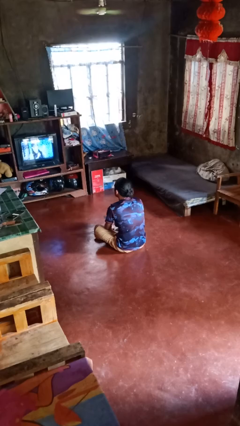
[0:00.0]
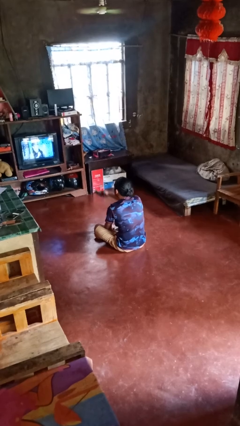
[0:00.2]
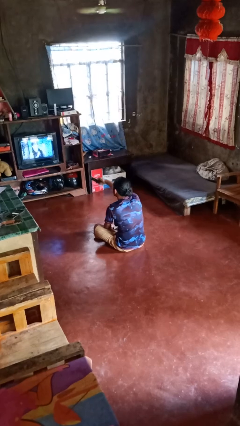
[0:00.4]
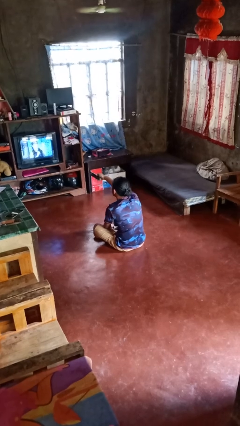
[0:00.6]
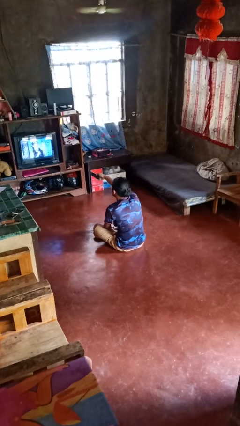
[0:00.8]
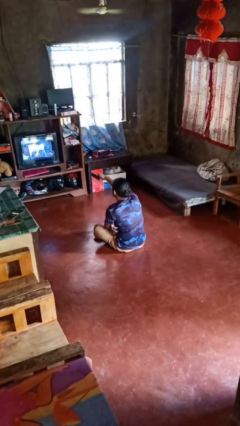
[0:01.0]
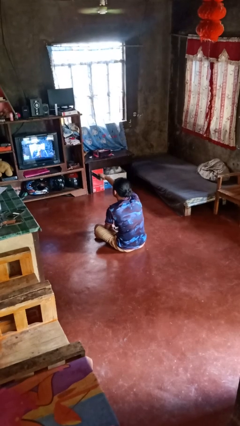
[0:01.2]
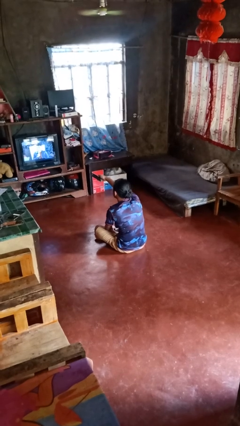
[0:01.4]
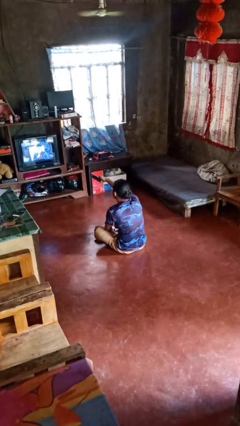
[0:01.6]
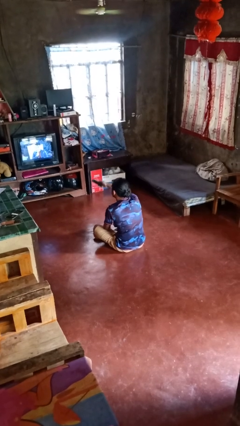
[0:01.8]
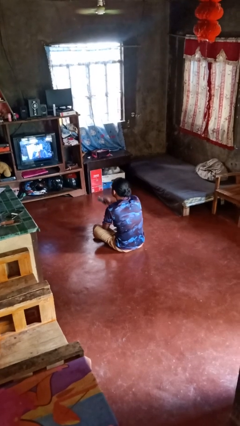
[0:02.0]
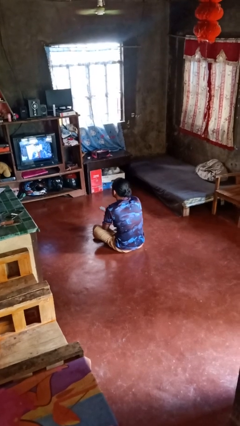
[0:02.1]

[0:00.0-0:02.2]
person uses television remote

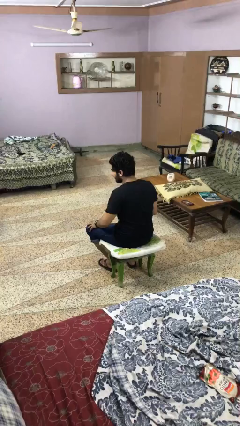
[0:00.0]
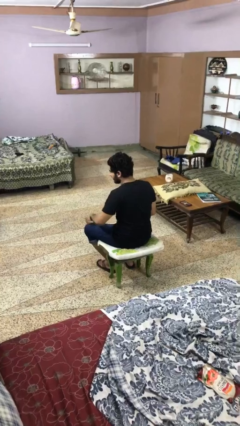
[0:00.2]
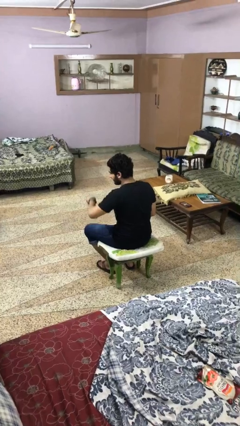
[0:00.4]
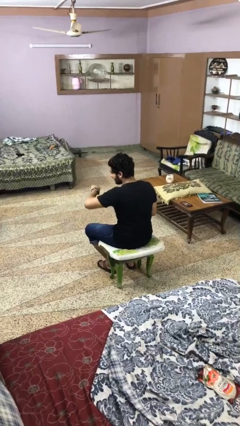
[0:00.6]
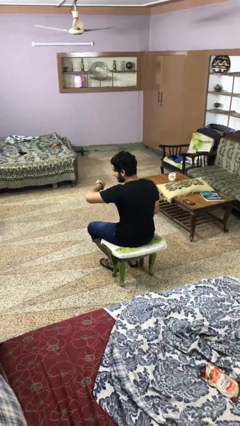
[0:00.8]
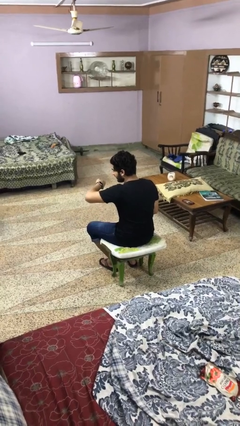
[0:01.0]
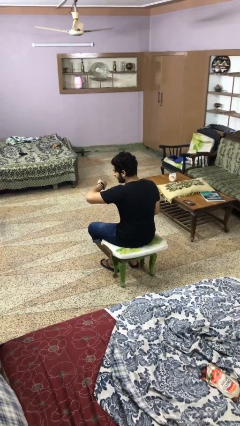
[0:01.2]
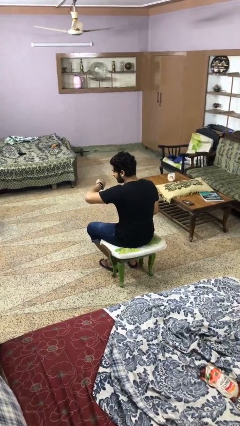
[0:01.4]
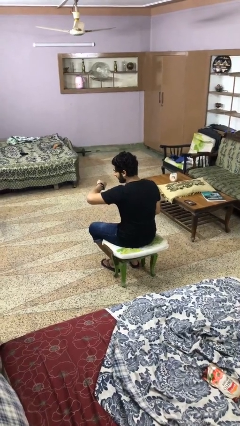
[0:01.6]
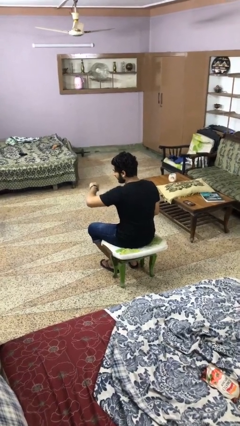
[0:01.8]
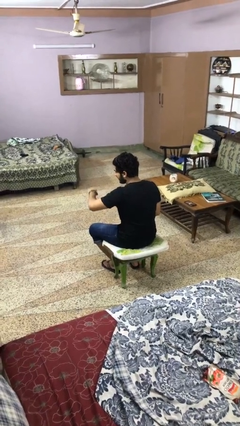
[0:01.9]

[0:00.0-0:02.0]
person looks at wristwatch

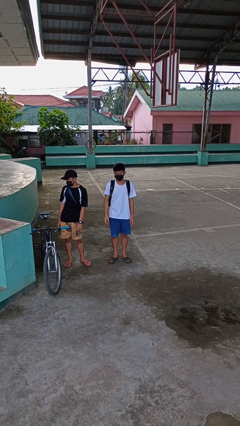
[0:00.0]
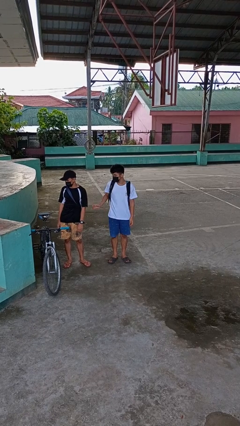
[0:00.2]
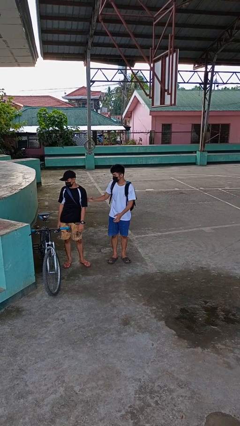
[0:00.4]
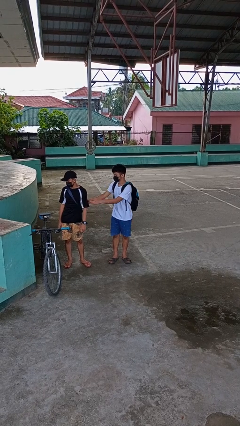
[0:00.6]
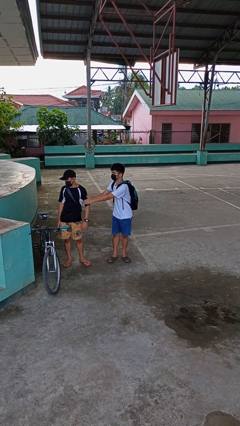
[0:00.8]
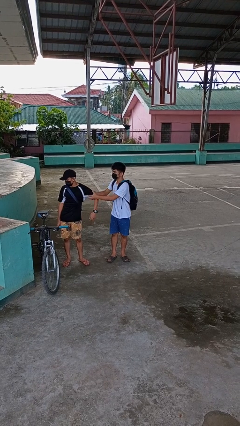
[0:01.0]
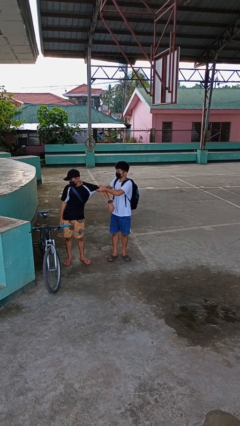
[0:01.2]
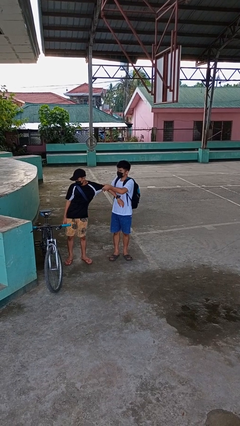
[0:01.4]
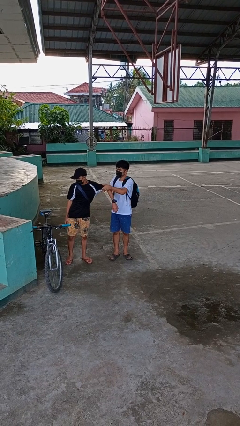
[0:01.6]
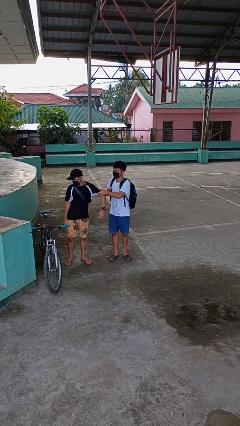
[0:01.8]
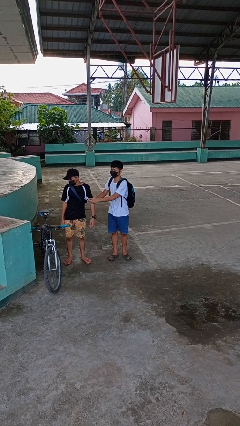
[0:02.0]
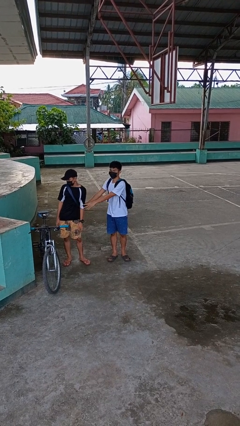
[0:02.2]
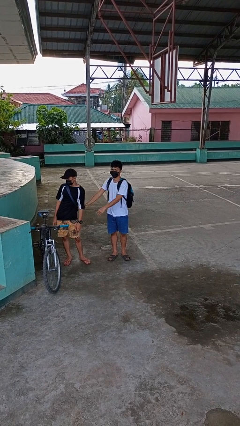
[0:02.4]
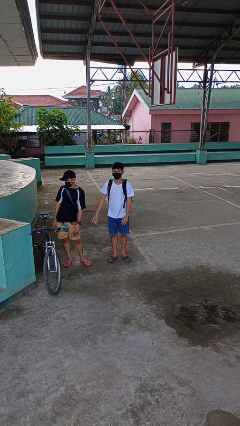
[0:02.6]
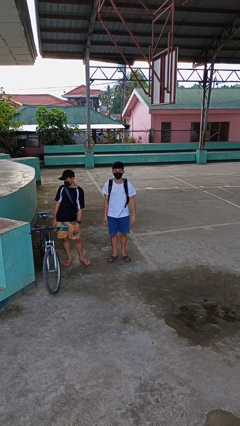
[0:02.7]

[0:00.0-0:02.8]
person grabs person by bicep

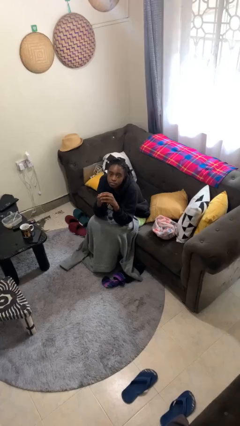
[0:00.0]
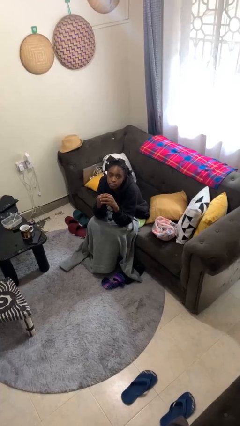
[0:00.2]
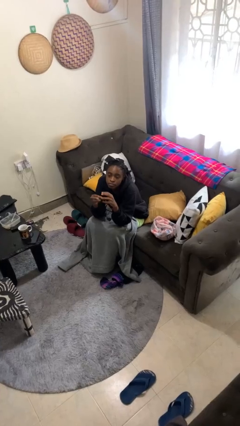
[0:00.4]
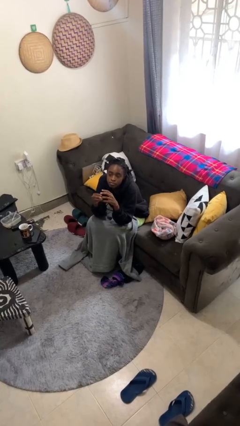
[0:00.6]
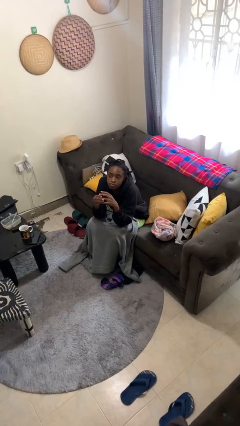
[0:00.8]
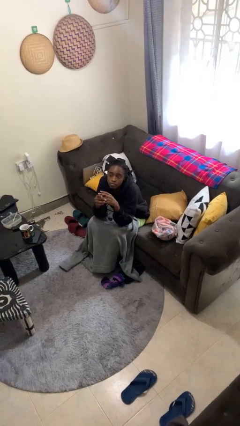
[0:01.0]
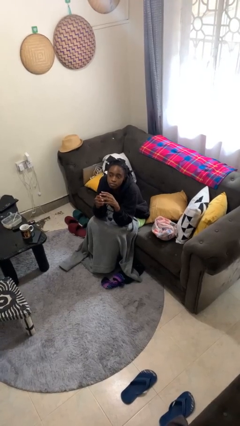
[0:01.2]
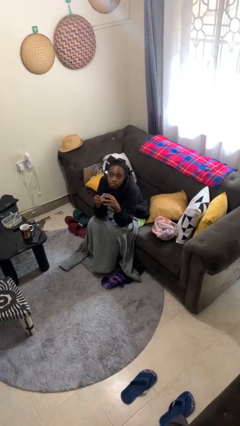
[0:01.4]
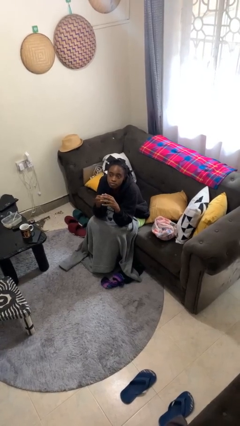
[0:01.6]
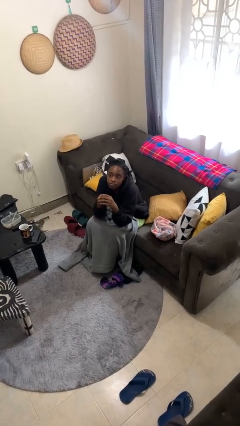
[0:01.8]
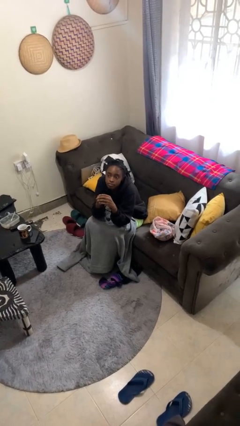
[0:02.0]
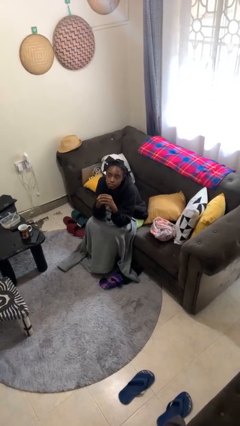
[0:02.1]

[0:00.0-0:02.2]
person puts on ring

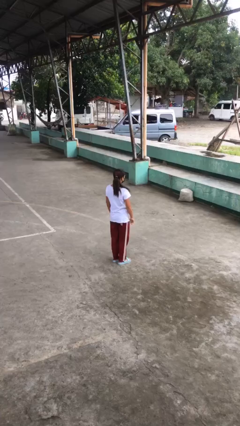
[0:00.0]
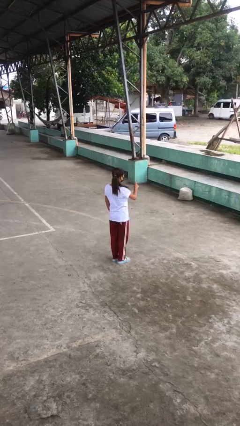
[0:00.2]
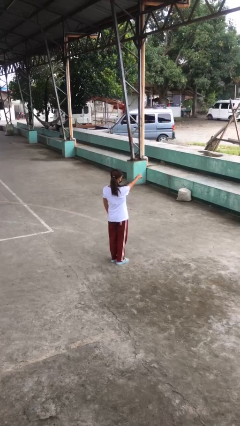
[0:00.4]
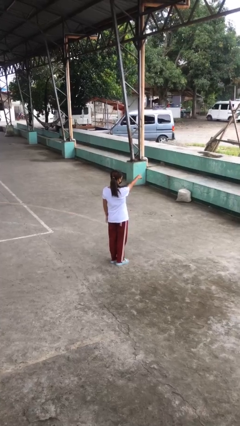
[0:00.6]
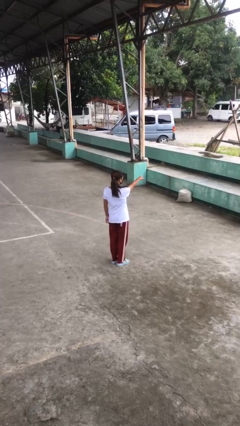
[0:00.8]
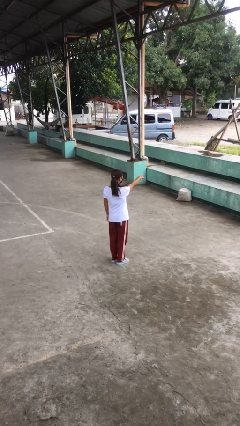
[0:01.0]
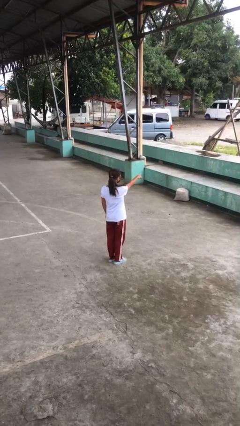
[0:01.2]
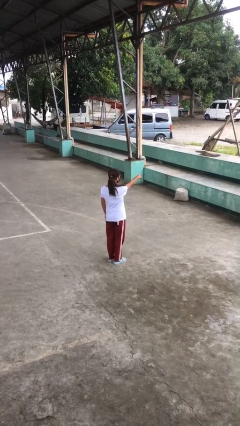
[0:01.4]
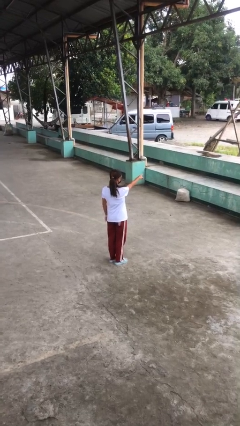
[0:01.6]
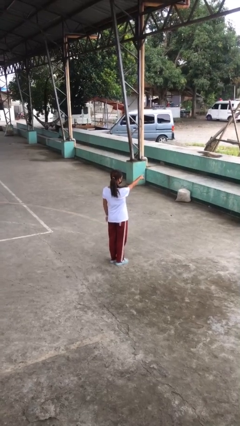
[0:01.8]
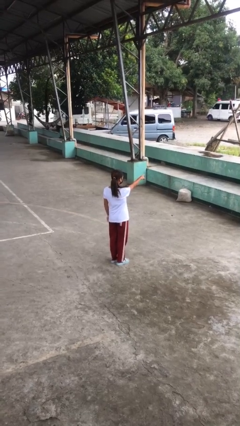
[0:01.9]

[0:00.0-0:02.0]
person points at person

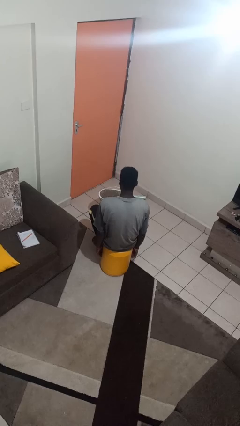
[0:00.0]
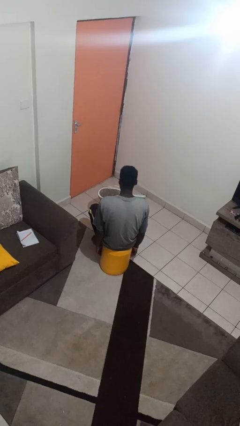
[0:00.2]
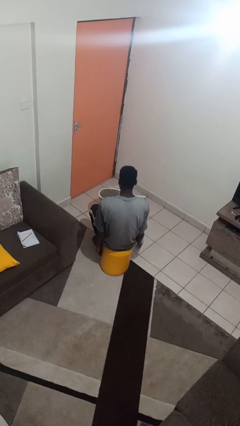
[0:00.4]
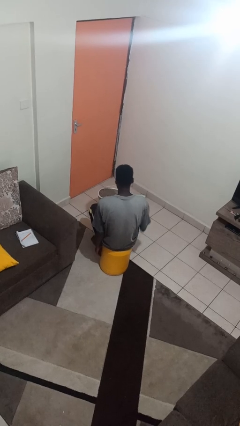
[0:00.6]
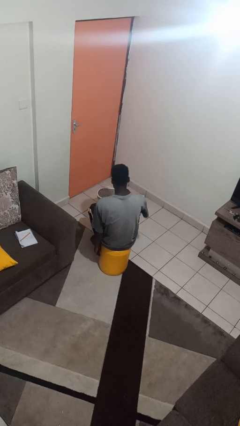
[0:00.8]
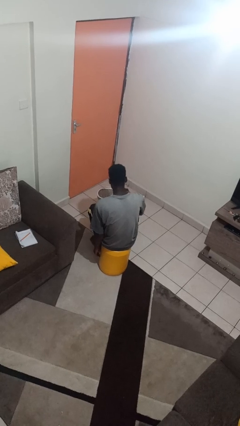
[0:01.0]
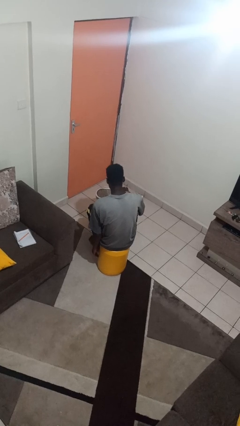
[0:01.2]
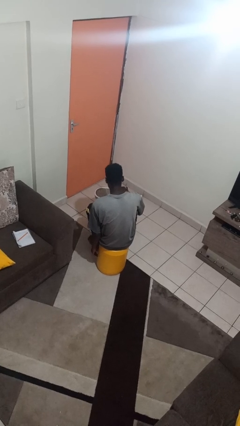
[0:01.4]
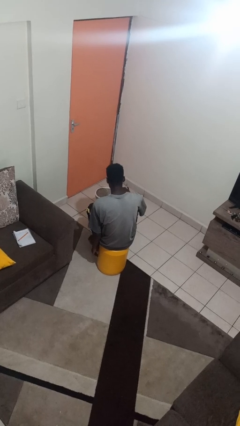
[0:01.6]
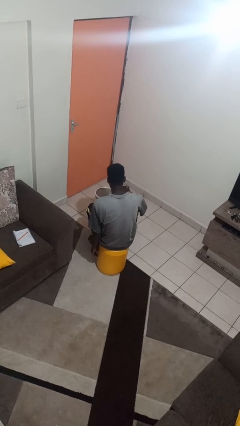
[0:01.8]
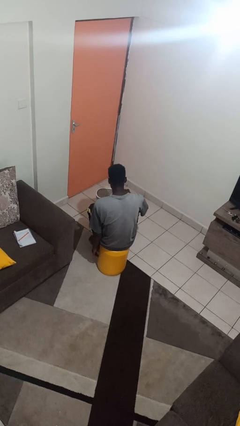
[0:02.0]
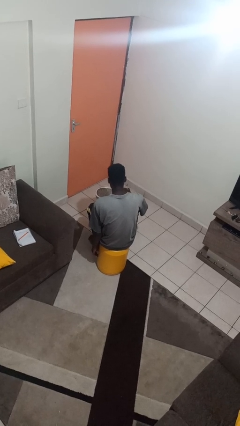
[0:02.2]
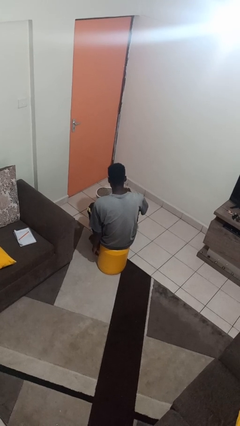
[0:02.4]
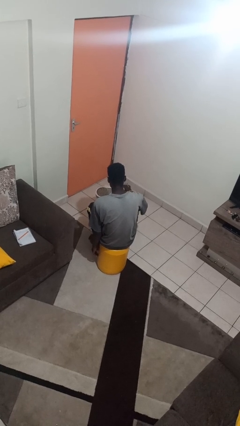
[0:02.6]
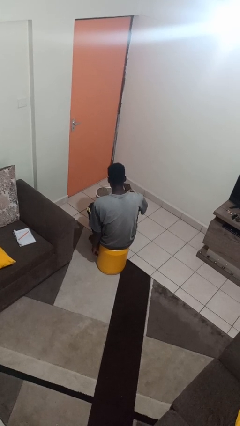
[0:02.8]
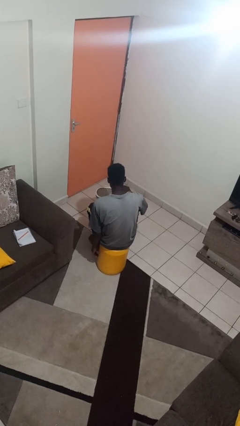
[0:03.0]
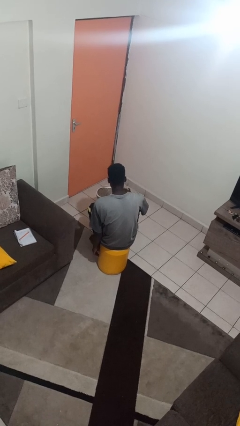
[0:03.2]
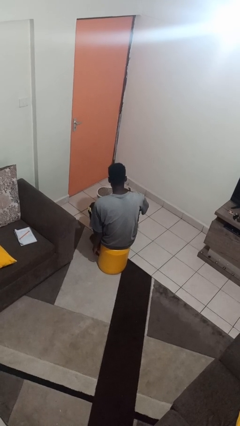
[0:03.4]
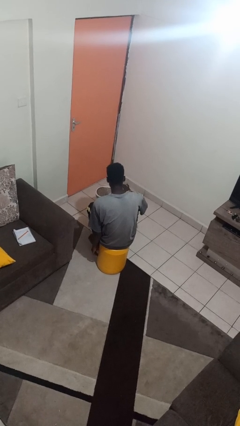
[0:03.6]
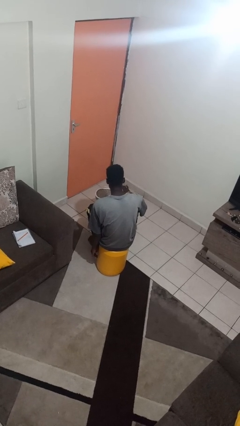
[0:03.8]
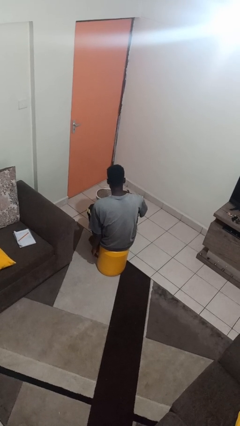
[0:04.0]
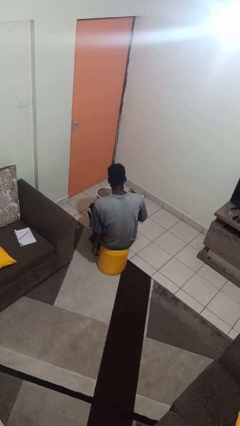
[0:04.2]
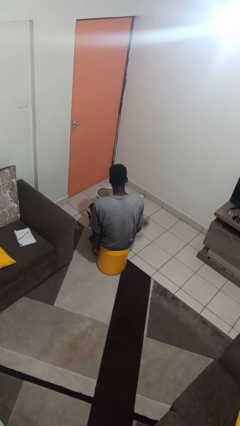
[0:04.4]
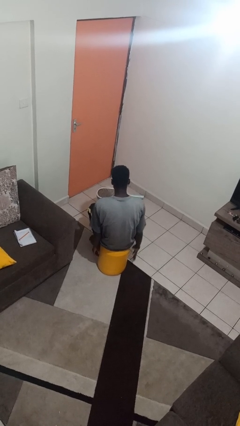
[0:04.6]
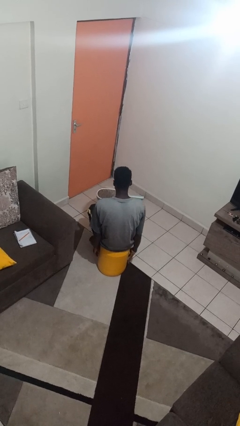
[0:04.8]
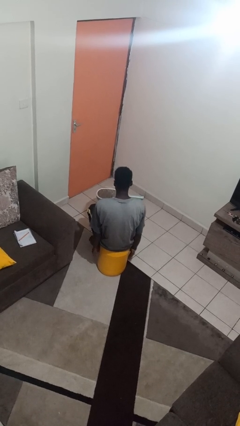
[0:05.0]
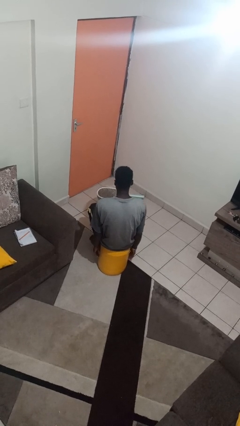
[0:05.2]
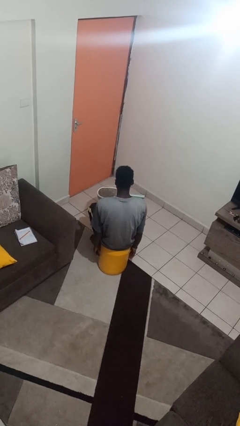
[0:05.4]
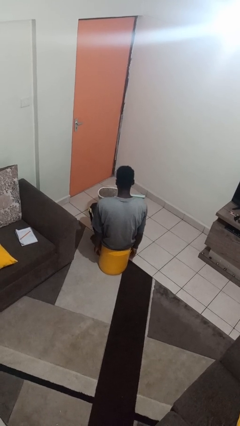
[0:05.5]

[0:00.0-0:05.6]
person taps object with finger

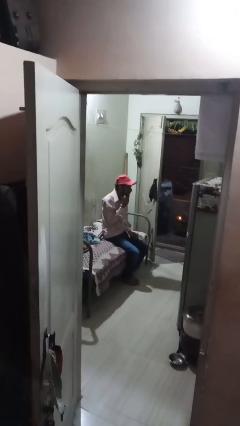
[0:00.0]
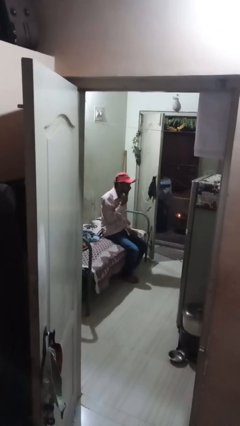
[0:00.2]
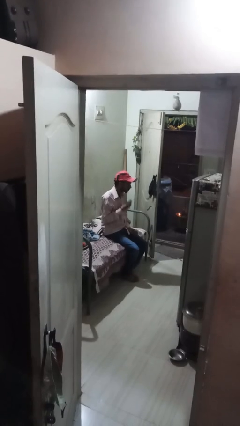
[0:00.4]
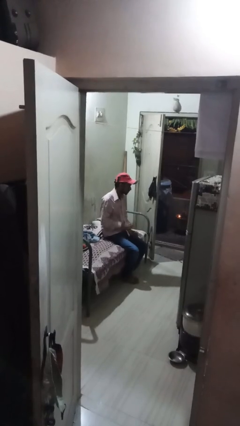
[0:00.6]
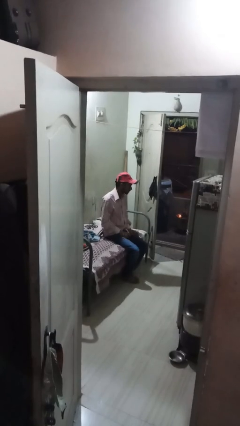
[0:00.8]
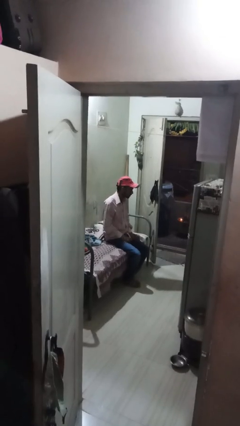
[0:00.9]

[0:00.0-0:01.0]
person strokes chin
